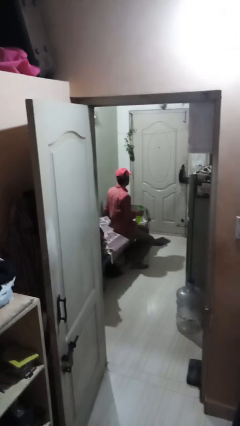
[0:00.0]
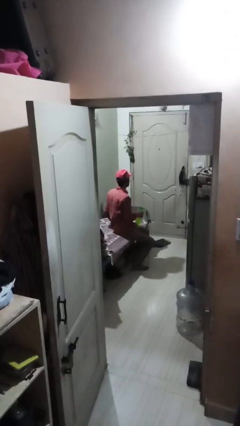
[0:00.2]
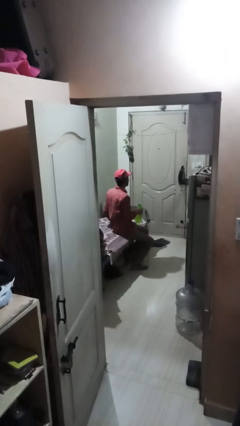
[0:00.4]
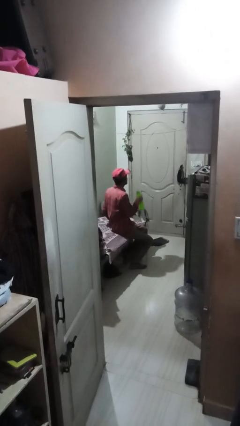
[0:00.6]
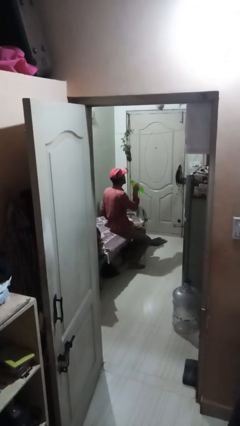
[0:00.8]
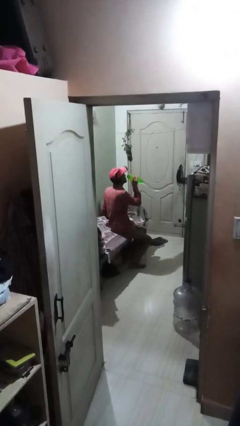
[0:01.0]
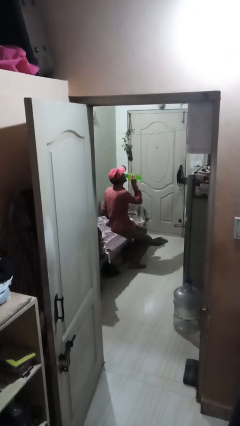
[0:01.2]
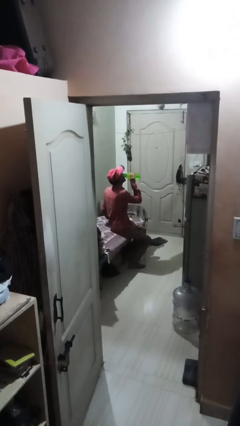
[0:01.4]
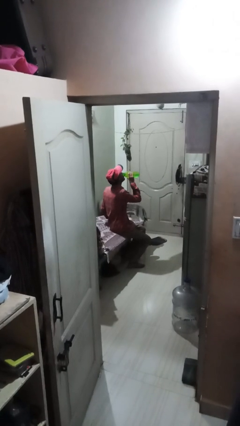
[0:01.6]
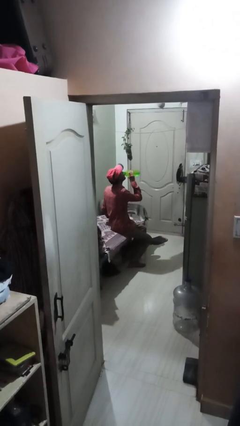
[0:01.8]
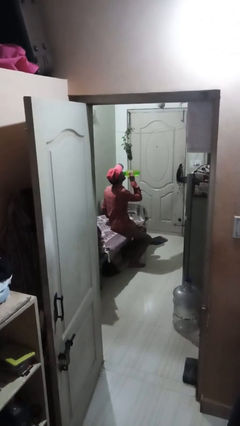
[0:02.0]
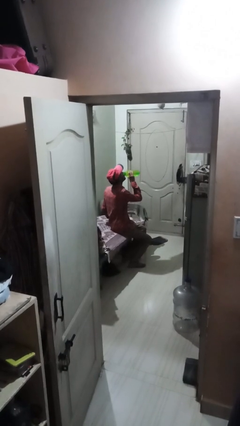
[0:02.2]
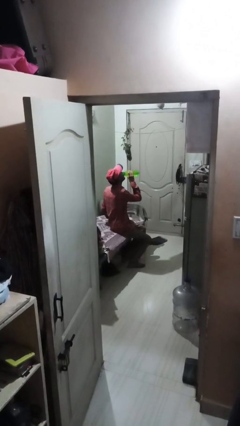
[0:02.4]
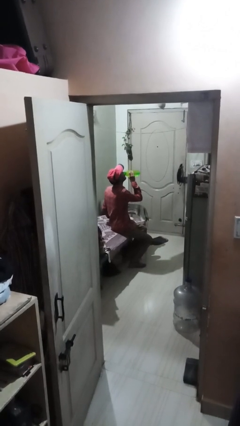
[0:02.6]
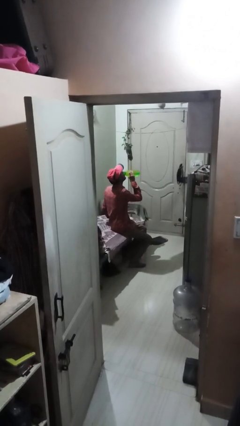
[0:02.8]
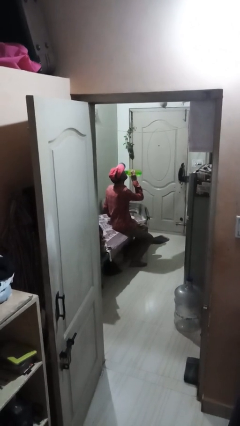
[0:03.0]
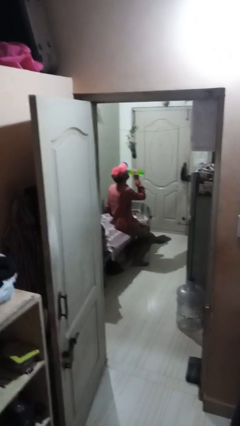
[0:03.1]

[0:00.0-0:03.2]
person drinks from bottle

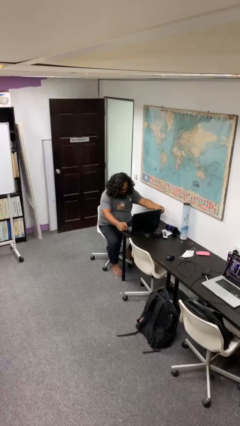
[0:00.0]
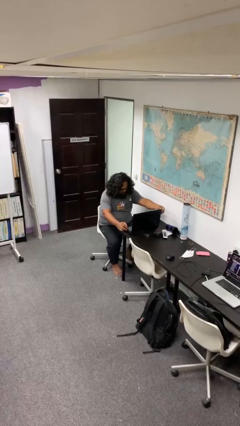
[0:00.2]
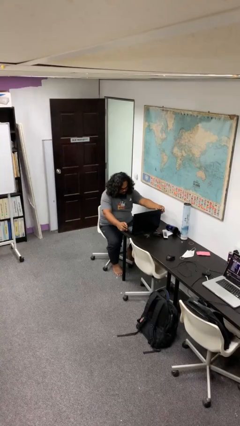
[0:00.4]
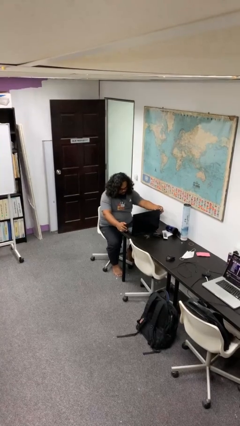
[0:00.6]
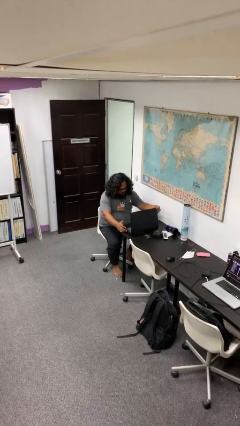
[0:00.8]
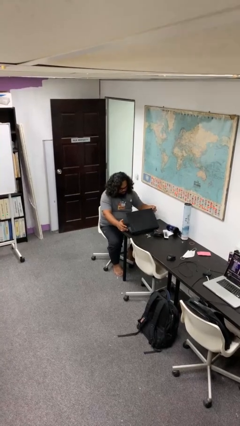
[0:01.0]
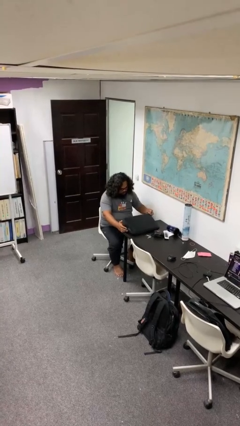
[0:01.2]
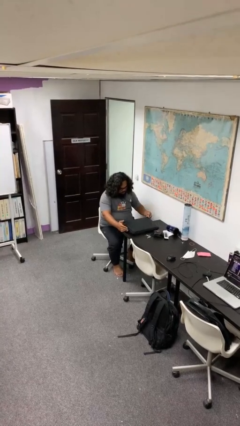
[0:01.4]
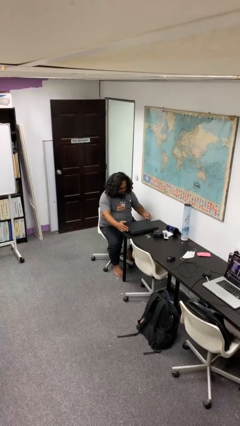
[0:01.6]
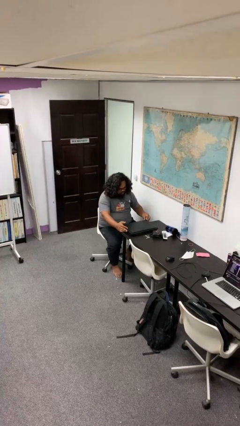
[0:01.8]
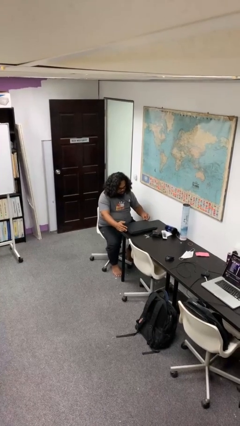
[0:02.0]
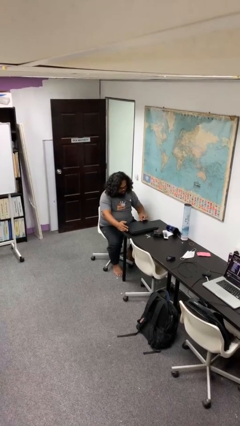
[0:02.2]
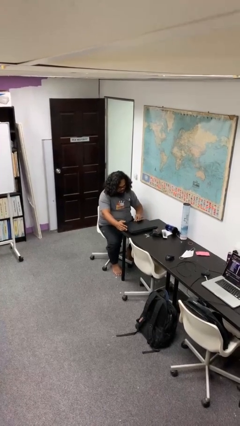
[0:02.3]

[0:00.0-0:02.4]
person closes laptop

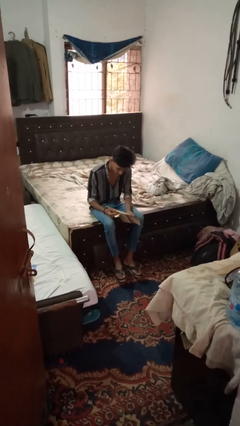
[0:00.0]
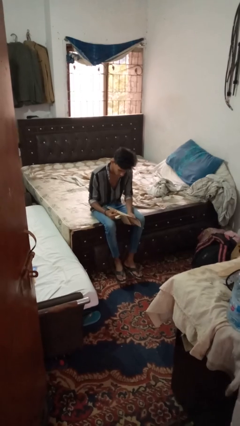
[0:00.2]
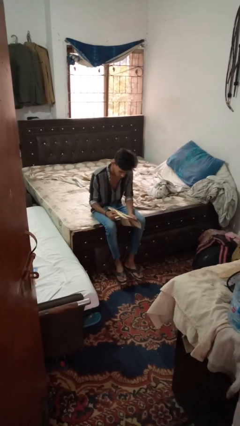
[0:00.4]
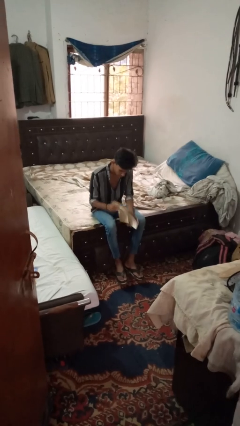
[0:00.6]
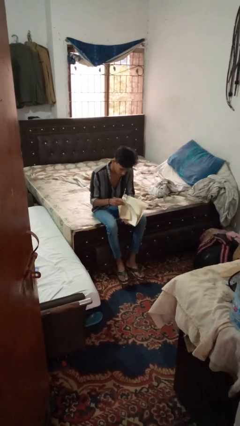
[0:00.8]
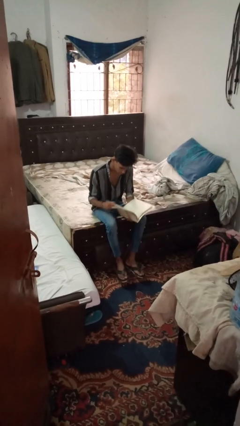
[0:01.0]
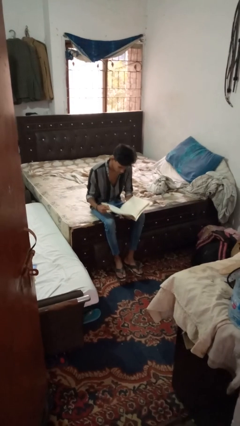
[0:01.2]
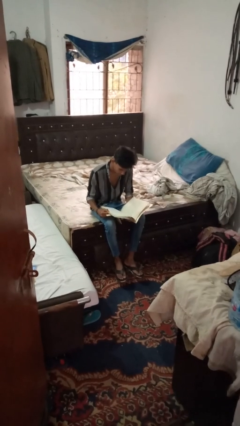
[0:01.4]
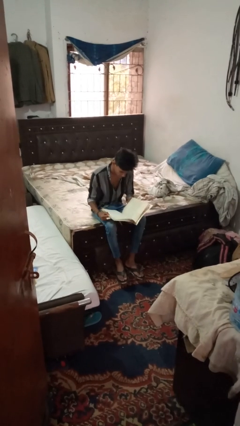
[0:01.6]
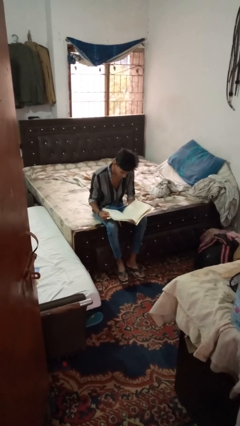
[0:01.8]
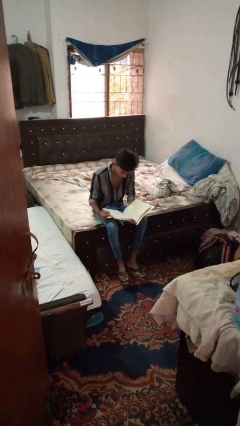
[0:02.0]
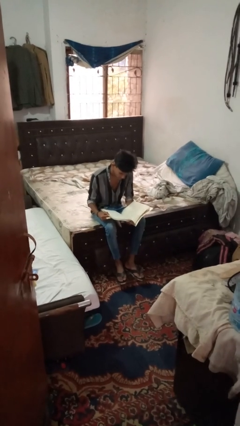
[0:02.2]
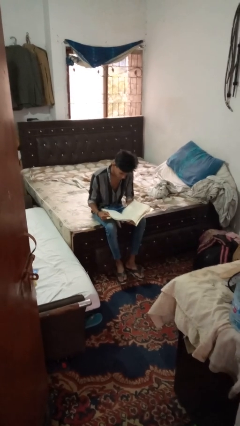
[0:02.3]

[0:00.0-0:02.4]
person reads magazine

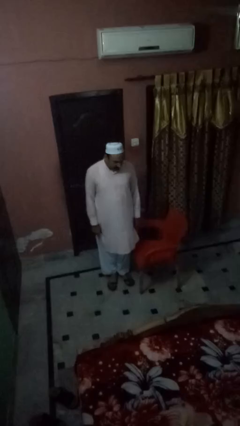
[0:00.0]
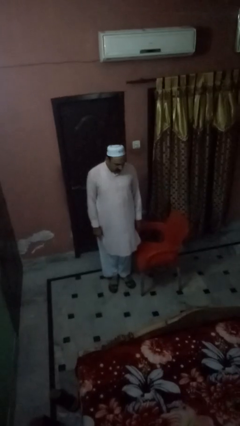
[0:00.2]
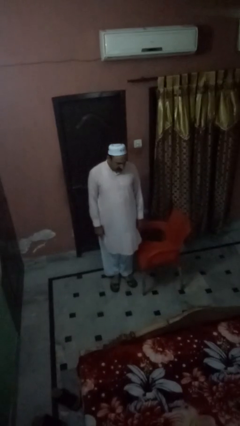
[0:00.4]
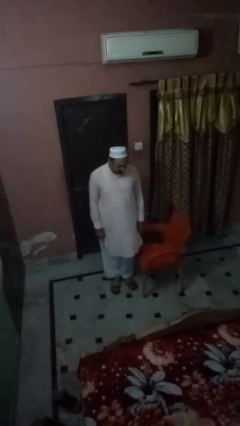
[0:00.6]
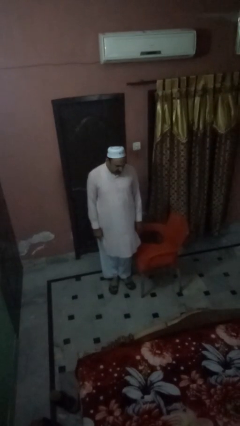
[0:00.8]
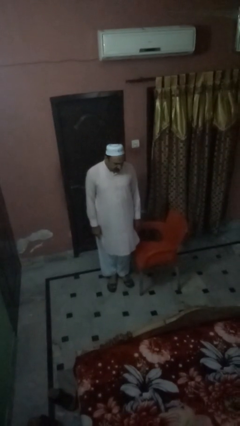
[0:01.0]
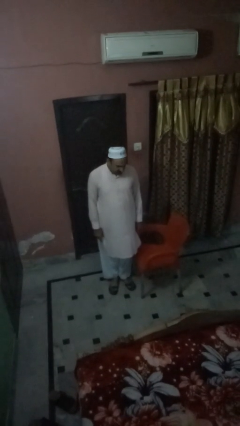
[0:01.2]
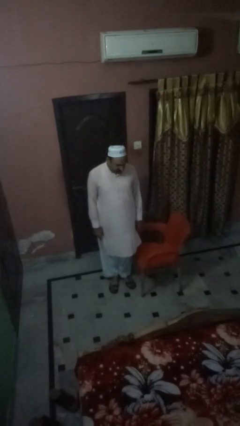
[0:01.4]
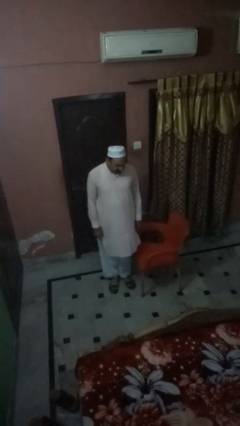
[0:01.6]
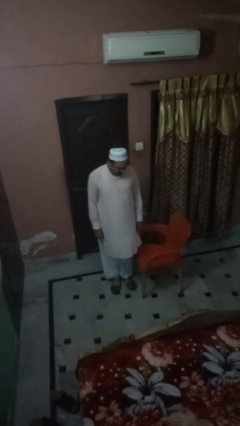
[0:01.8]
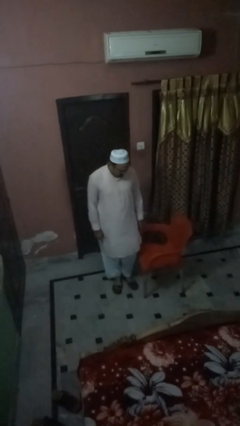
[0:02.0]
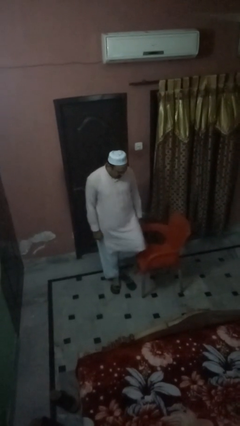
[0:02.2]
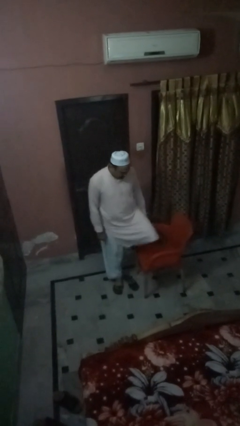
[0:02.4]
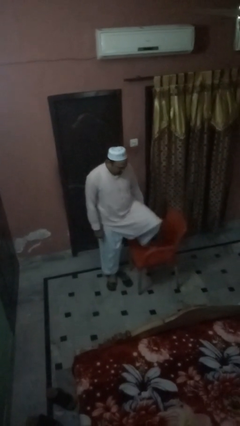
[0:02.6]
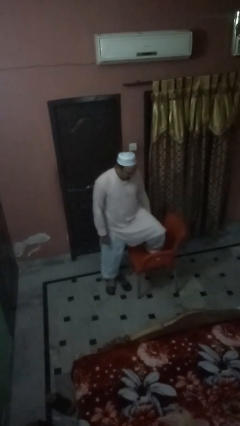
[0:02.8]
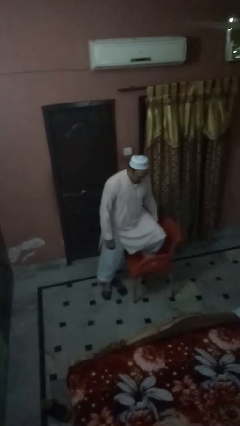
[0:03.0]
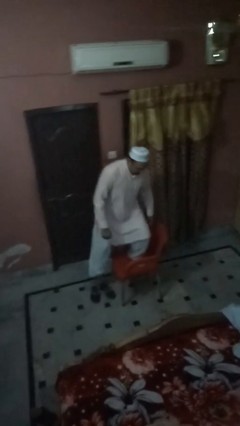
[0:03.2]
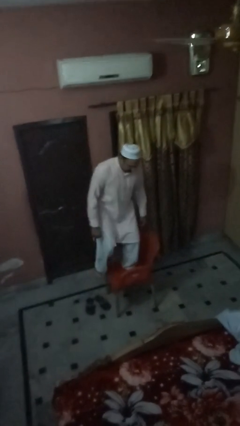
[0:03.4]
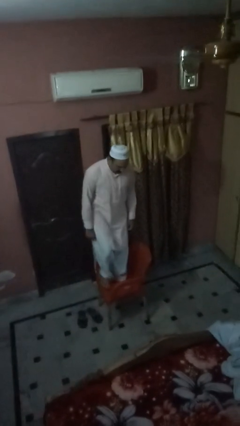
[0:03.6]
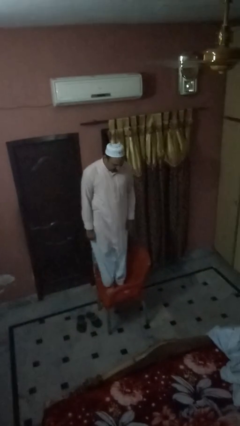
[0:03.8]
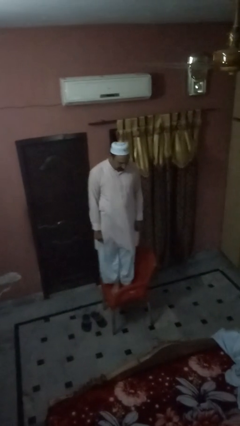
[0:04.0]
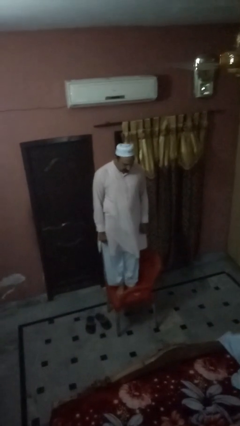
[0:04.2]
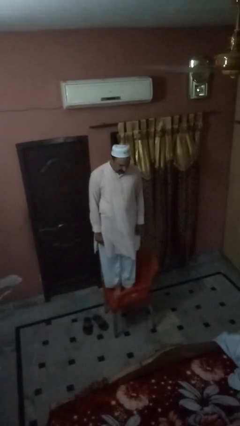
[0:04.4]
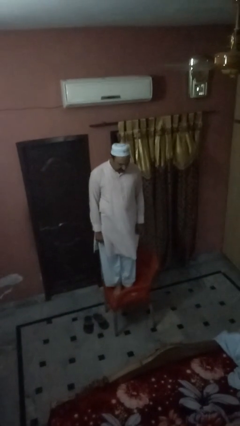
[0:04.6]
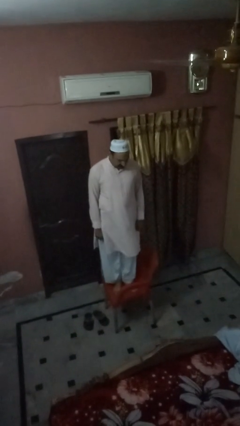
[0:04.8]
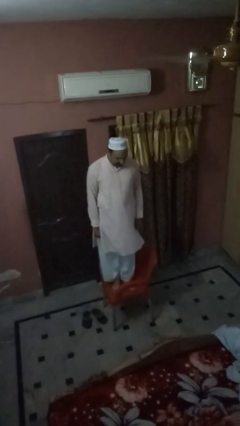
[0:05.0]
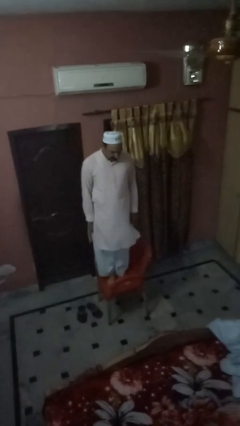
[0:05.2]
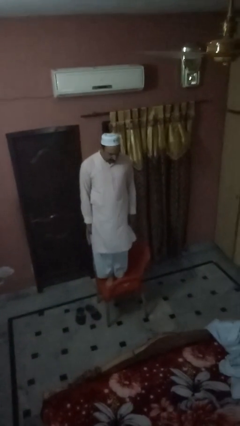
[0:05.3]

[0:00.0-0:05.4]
person climbs on chair

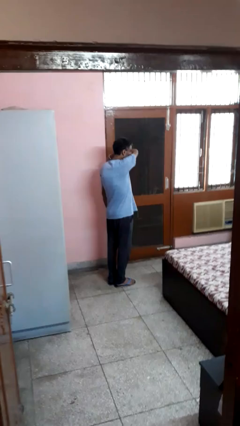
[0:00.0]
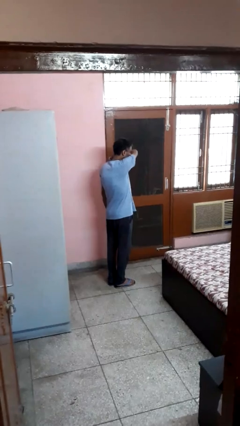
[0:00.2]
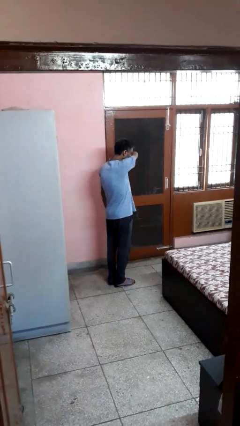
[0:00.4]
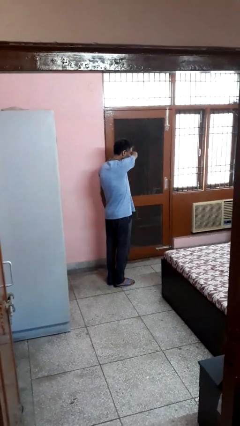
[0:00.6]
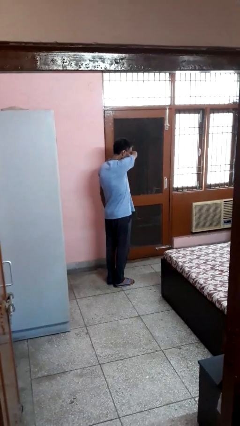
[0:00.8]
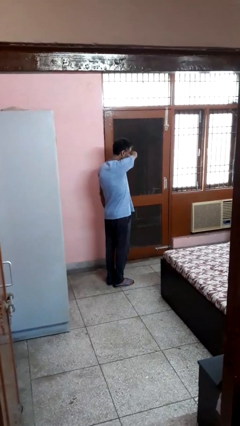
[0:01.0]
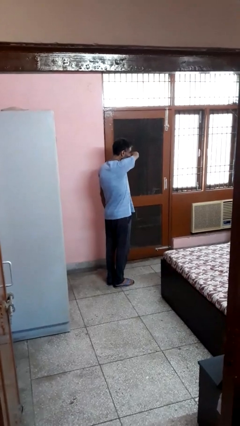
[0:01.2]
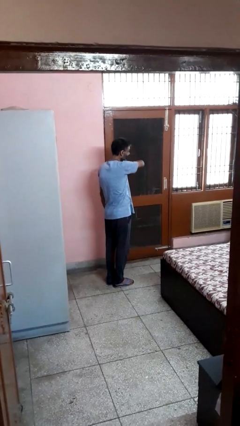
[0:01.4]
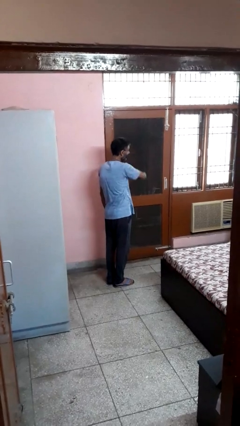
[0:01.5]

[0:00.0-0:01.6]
person sneezes into arm

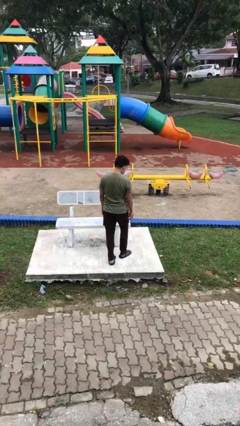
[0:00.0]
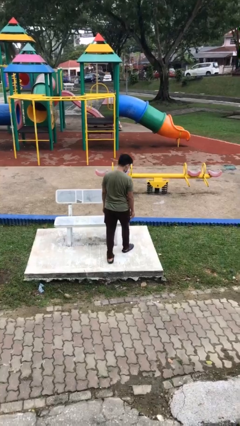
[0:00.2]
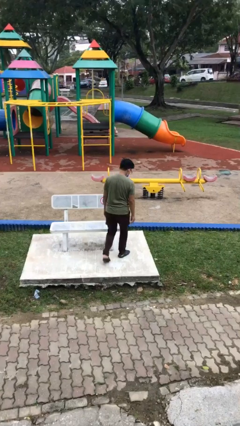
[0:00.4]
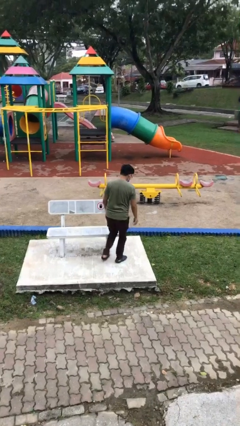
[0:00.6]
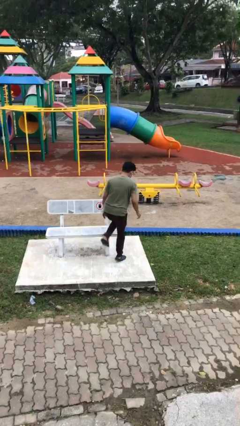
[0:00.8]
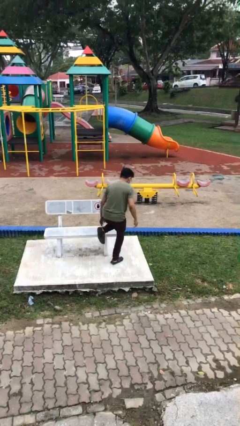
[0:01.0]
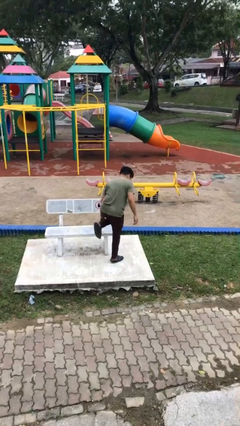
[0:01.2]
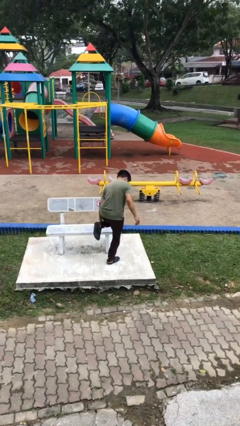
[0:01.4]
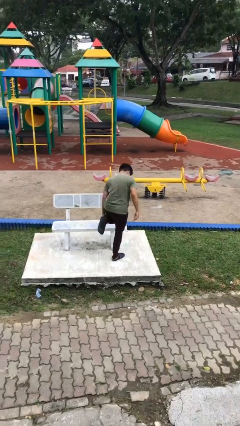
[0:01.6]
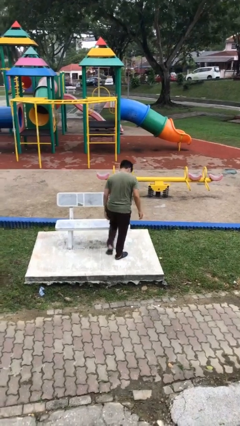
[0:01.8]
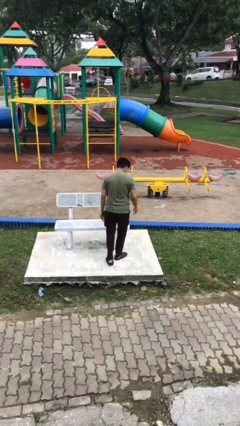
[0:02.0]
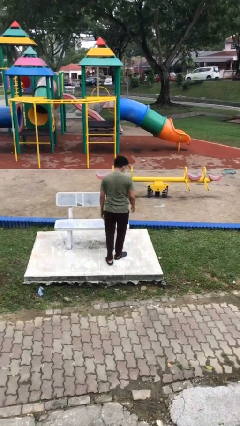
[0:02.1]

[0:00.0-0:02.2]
person stubs toe
